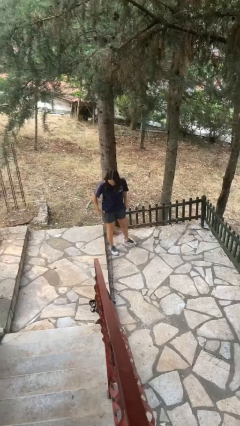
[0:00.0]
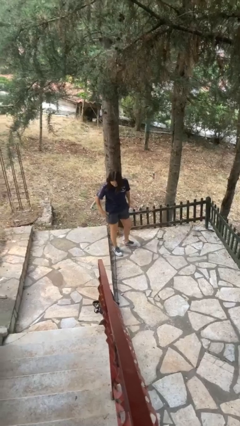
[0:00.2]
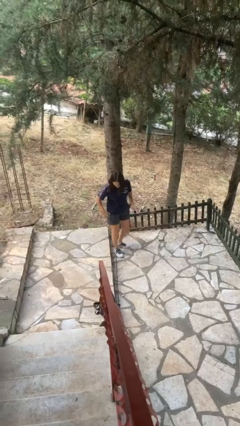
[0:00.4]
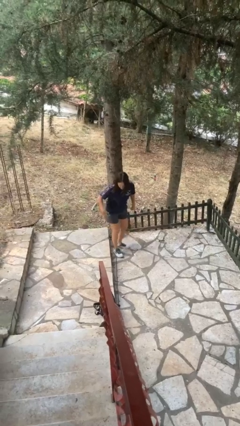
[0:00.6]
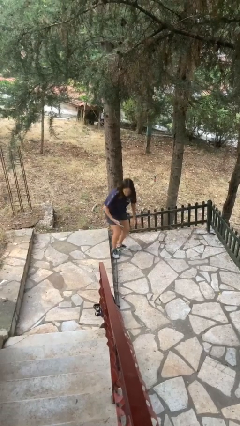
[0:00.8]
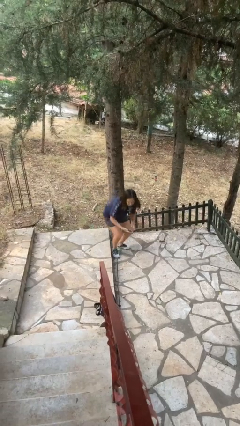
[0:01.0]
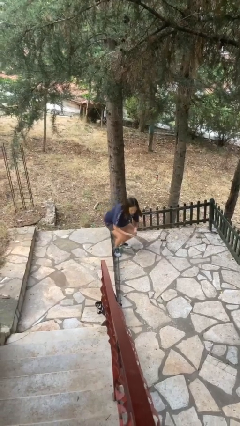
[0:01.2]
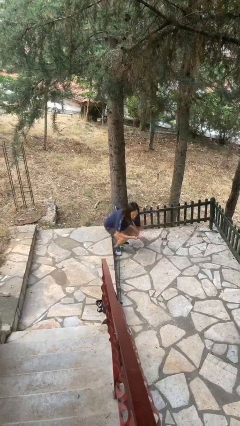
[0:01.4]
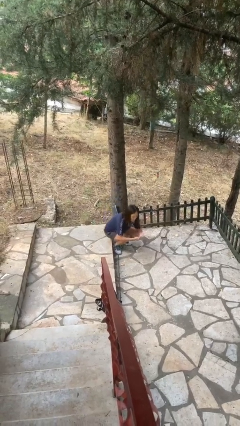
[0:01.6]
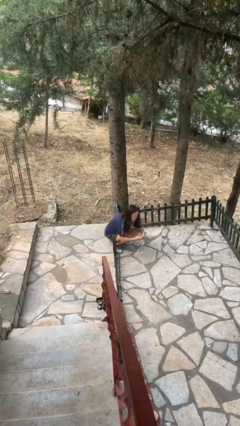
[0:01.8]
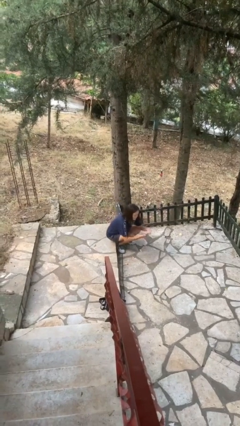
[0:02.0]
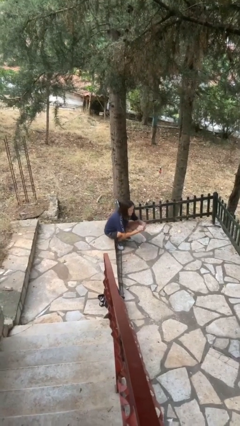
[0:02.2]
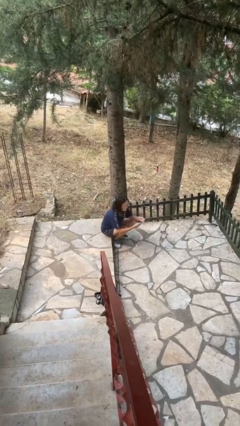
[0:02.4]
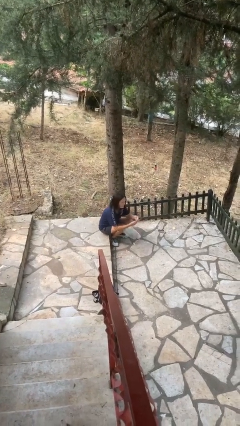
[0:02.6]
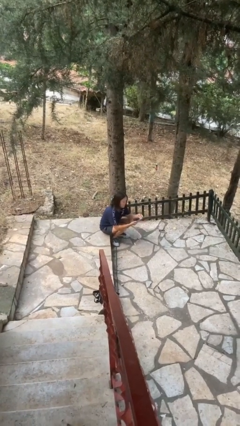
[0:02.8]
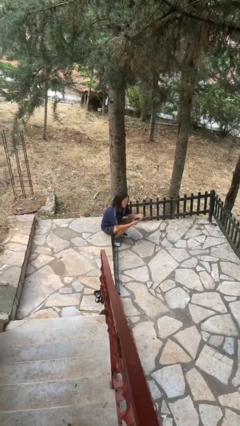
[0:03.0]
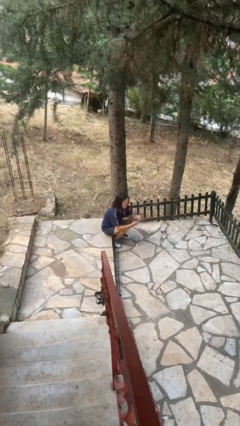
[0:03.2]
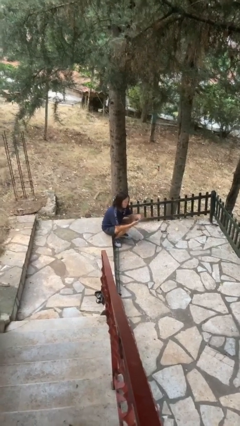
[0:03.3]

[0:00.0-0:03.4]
person takes phone from pocket

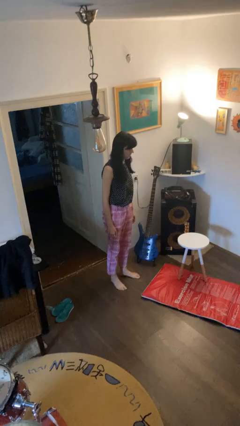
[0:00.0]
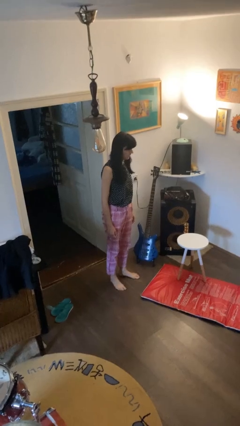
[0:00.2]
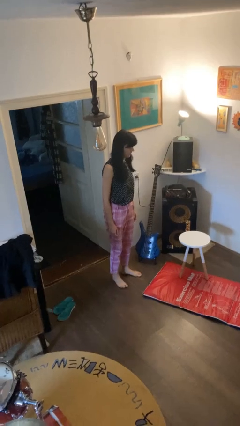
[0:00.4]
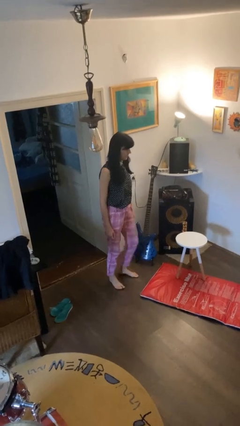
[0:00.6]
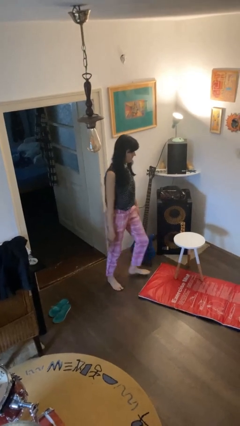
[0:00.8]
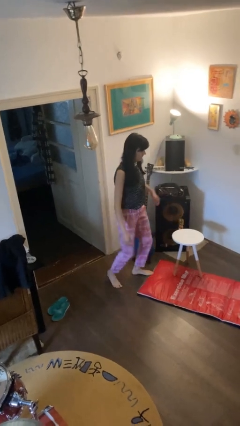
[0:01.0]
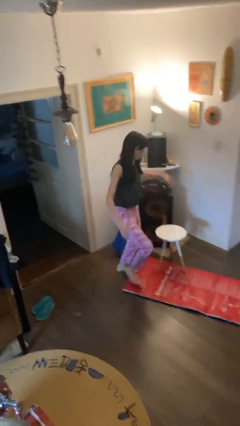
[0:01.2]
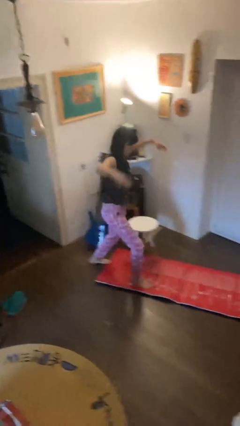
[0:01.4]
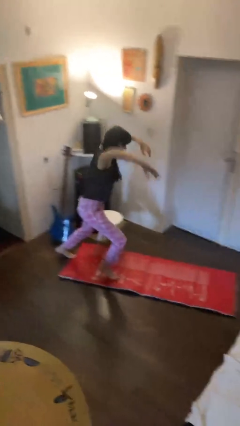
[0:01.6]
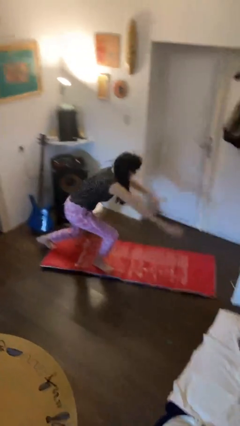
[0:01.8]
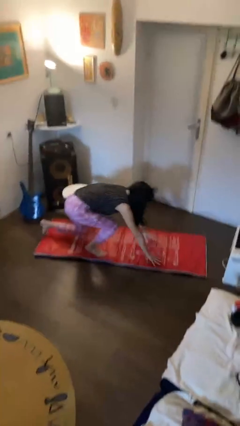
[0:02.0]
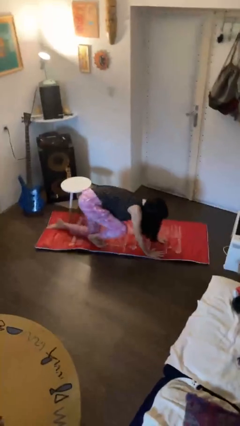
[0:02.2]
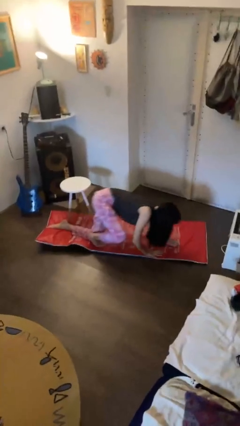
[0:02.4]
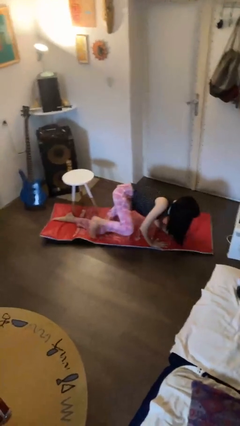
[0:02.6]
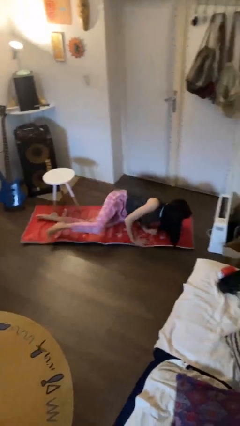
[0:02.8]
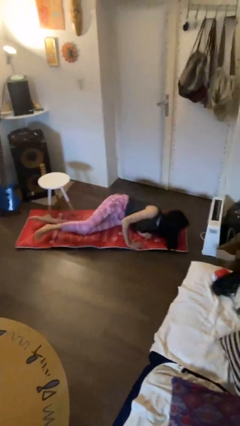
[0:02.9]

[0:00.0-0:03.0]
person trips on object on floor

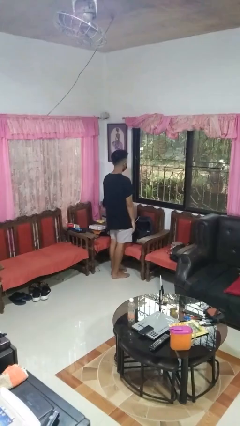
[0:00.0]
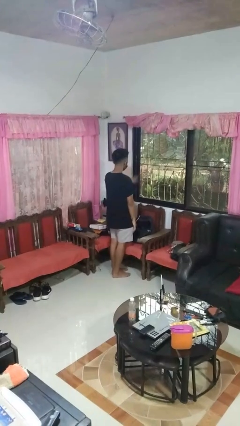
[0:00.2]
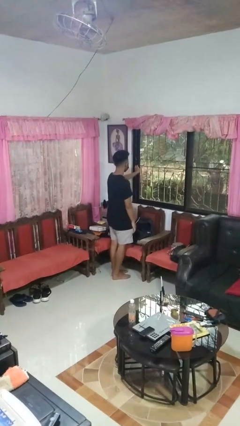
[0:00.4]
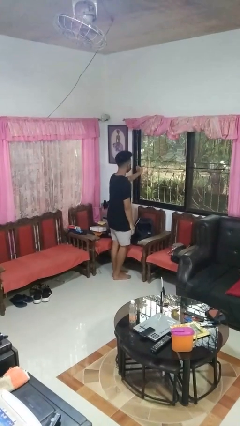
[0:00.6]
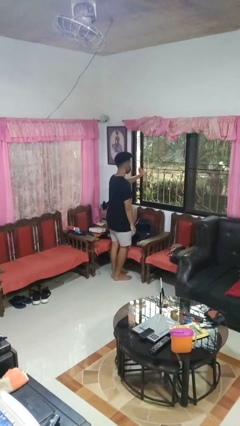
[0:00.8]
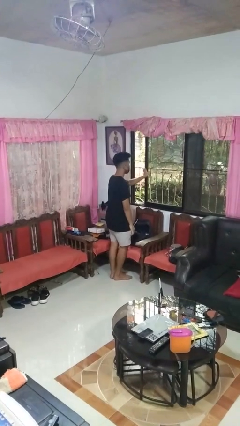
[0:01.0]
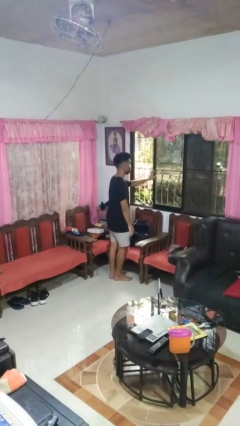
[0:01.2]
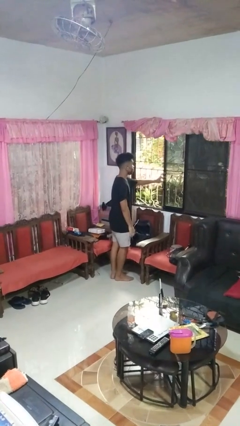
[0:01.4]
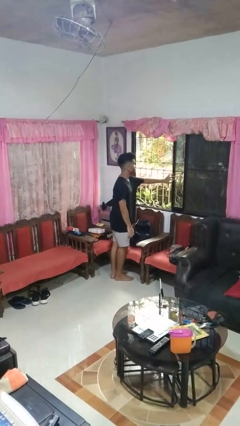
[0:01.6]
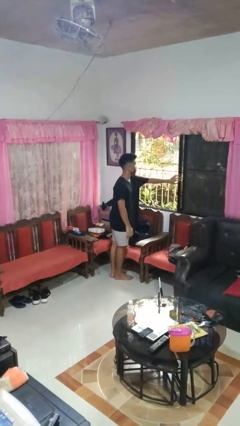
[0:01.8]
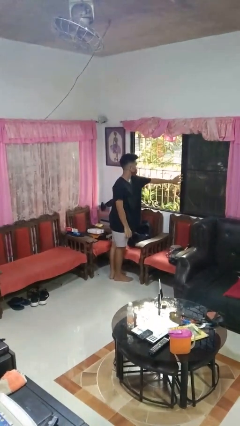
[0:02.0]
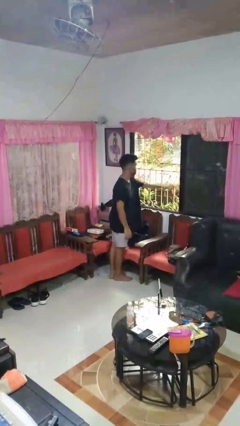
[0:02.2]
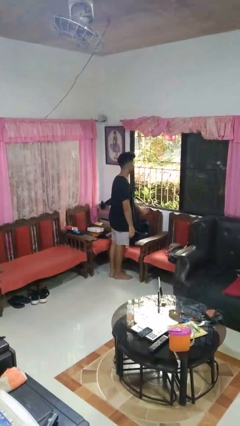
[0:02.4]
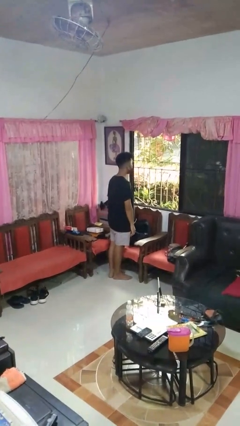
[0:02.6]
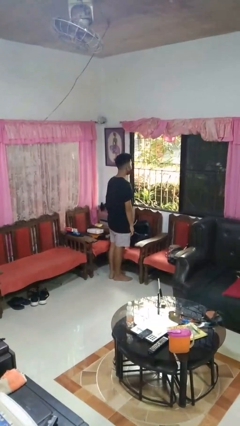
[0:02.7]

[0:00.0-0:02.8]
person opens home window

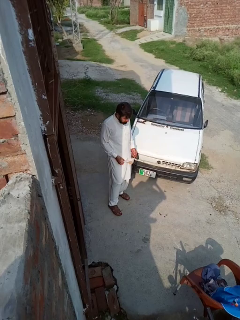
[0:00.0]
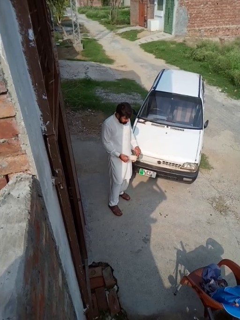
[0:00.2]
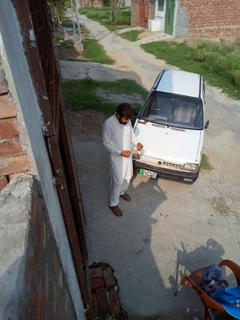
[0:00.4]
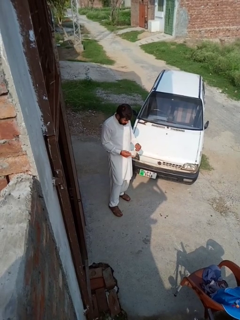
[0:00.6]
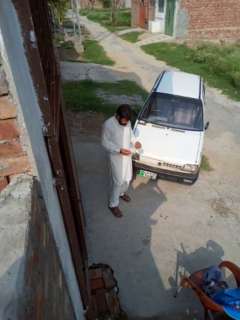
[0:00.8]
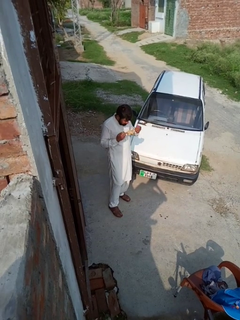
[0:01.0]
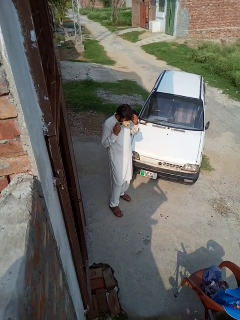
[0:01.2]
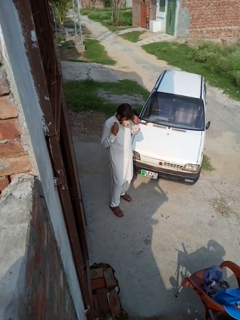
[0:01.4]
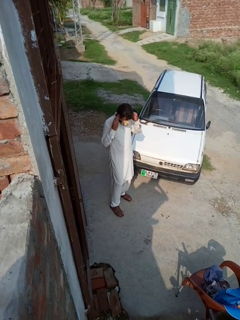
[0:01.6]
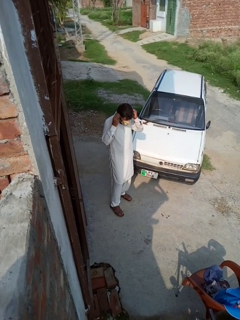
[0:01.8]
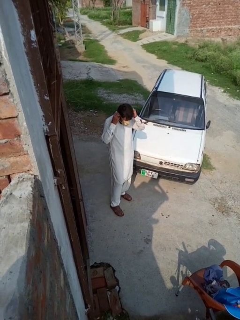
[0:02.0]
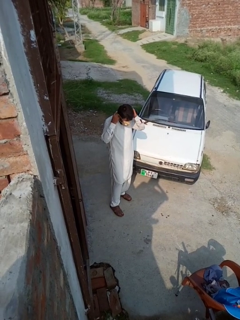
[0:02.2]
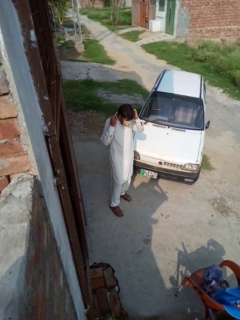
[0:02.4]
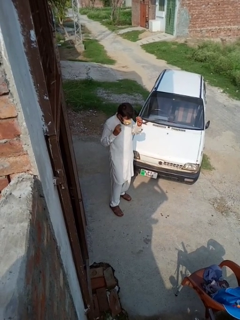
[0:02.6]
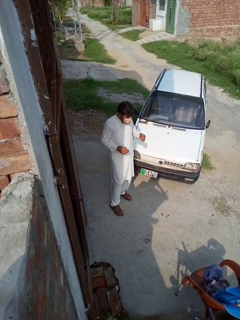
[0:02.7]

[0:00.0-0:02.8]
person puts on facemask

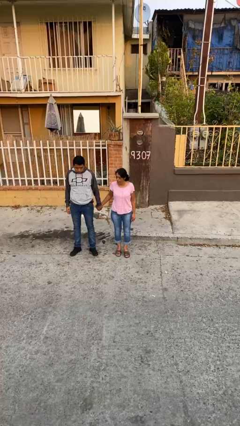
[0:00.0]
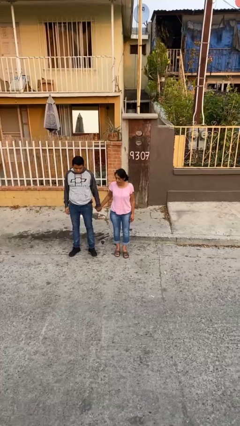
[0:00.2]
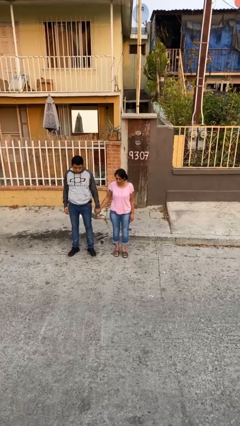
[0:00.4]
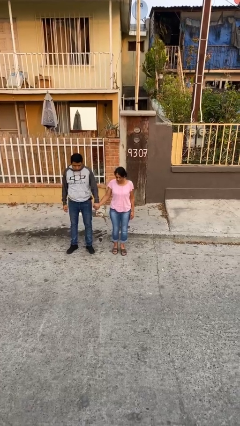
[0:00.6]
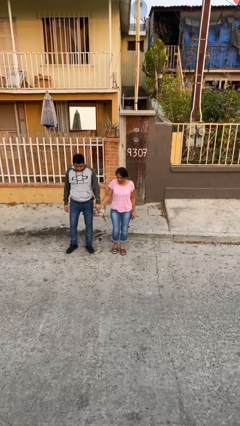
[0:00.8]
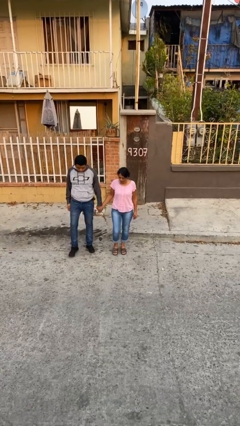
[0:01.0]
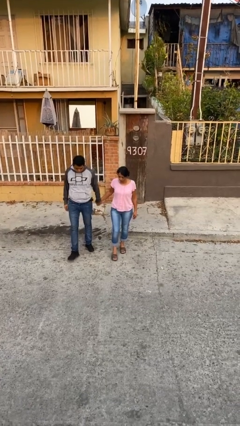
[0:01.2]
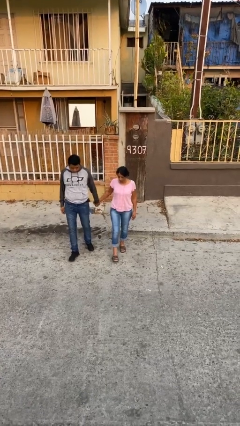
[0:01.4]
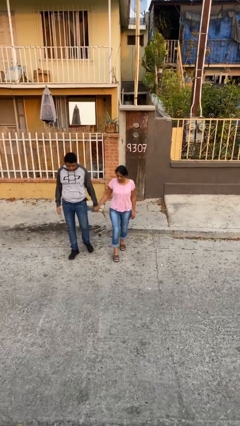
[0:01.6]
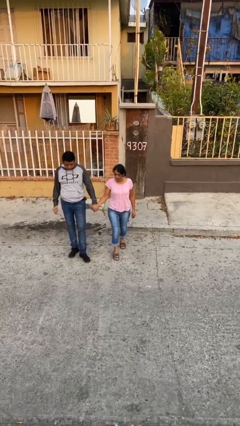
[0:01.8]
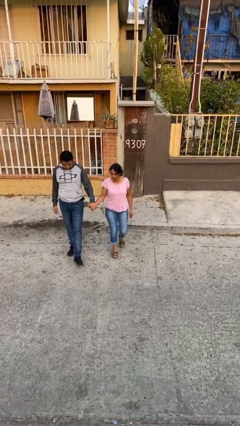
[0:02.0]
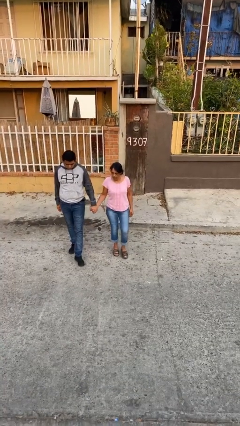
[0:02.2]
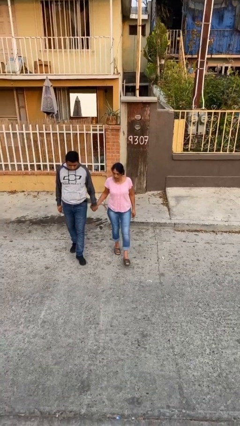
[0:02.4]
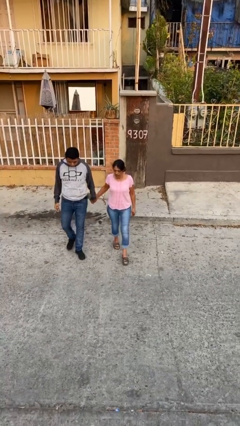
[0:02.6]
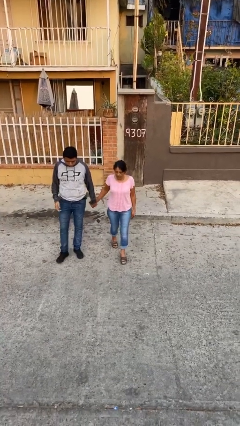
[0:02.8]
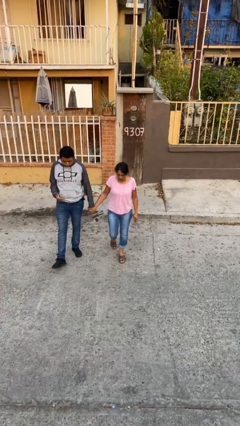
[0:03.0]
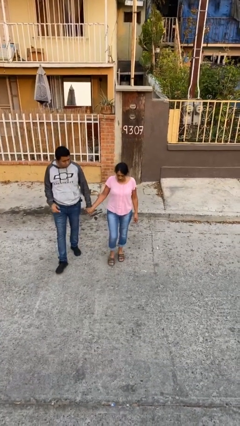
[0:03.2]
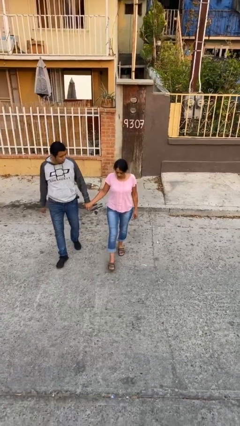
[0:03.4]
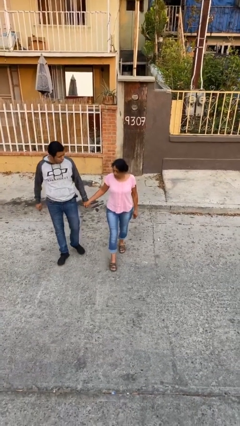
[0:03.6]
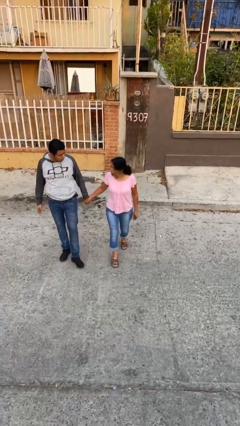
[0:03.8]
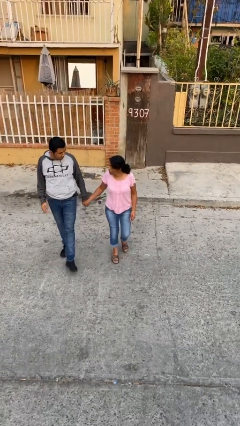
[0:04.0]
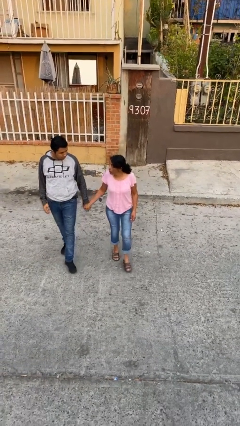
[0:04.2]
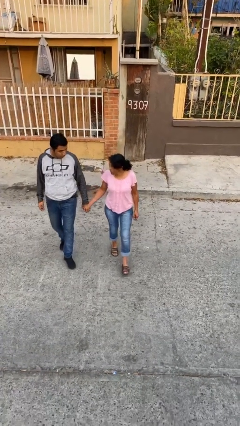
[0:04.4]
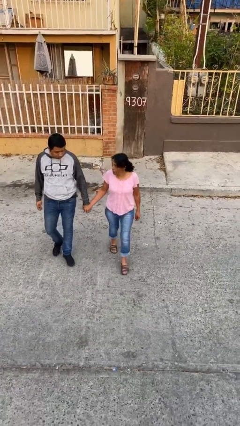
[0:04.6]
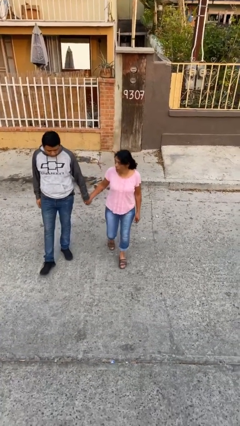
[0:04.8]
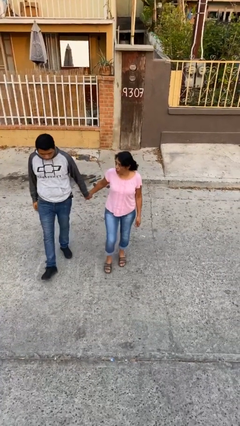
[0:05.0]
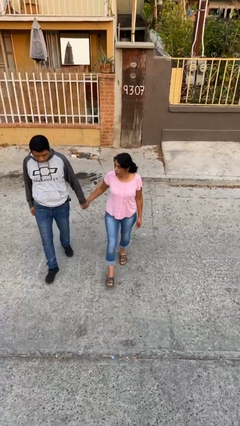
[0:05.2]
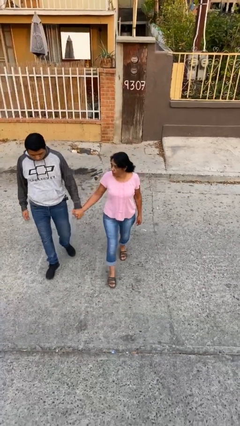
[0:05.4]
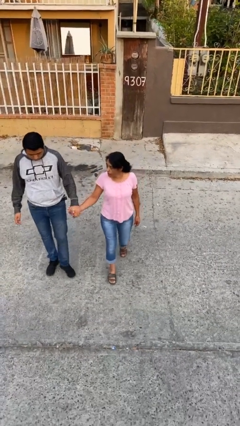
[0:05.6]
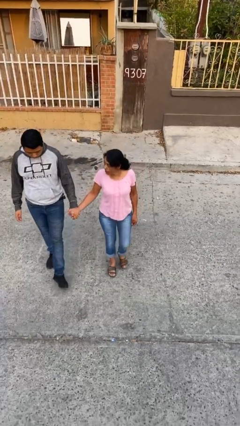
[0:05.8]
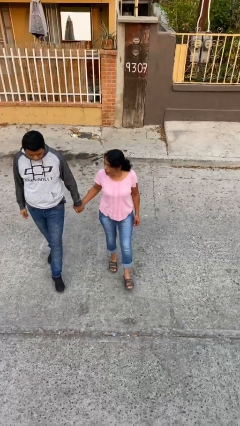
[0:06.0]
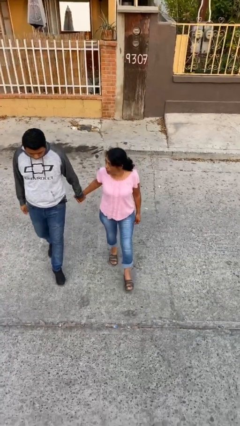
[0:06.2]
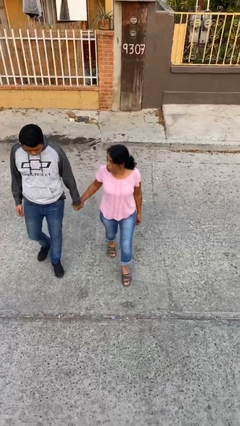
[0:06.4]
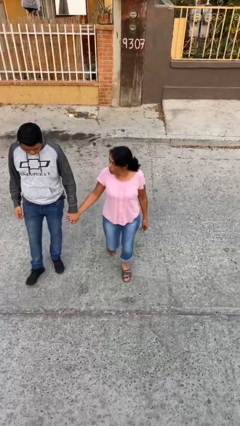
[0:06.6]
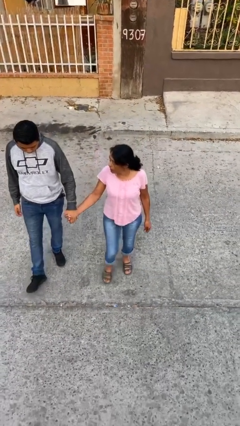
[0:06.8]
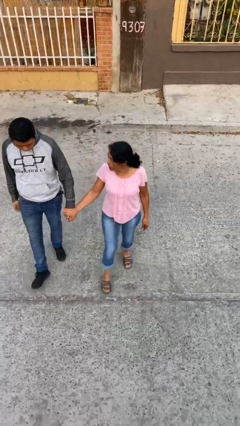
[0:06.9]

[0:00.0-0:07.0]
person holds hand
